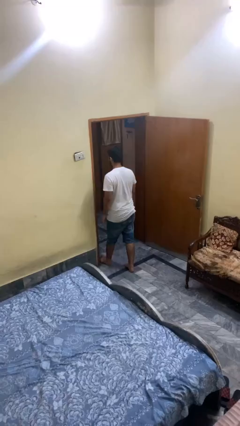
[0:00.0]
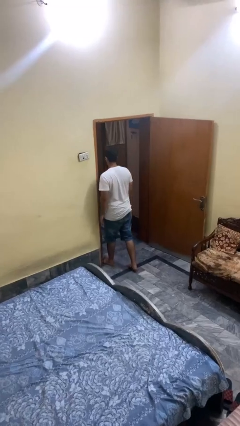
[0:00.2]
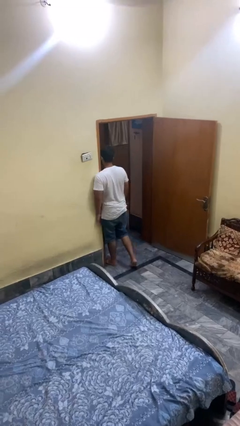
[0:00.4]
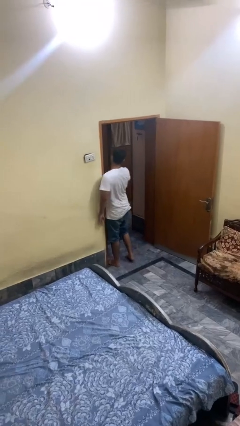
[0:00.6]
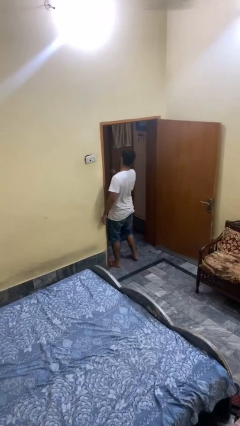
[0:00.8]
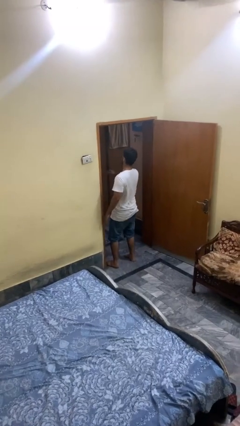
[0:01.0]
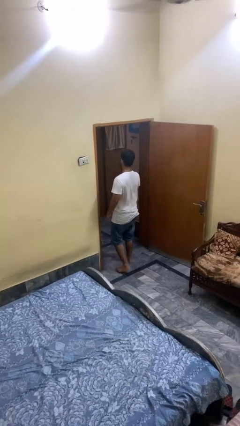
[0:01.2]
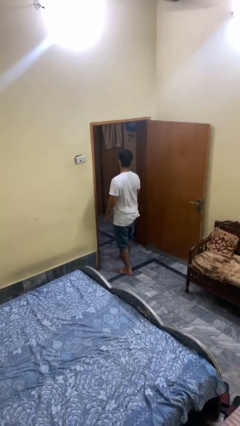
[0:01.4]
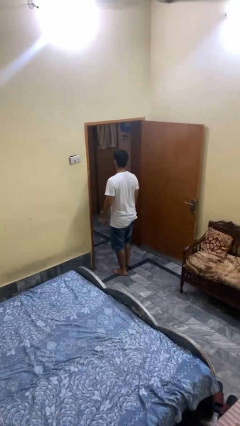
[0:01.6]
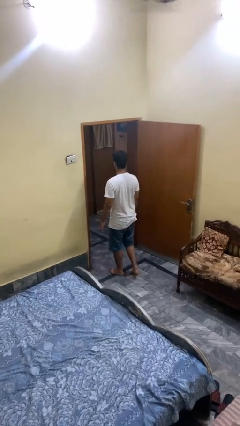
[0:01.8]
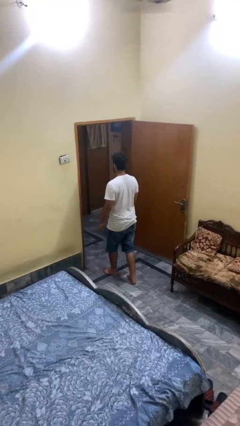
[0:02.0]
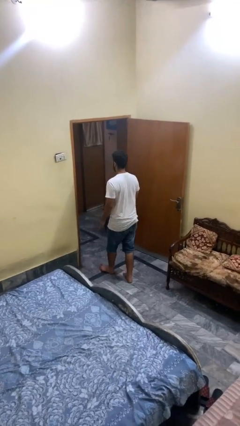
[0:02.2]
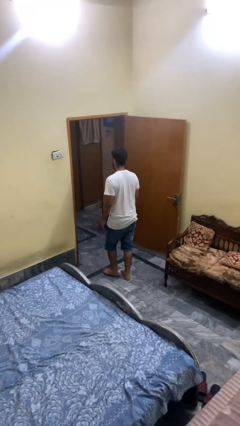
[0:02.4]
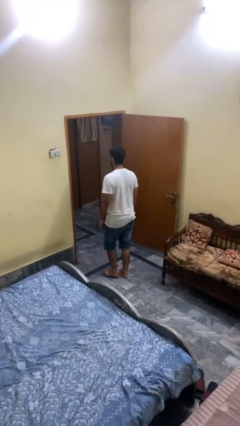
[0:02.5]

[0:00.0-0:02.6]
person bumps into wall

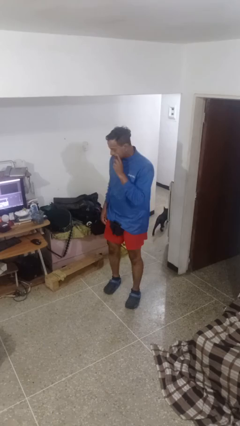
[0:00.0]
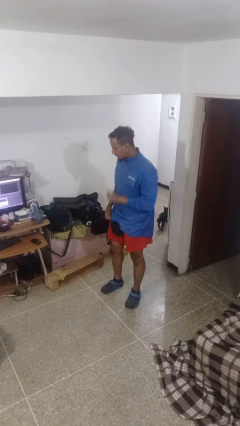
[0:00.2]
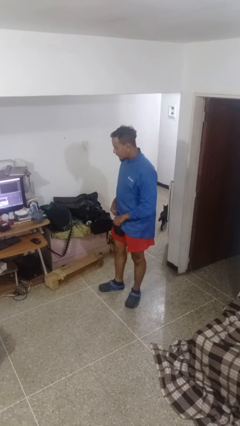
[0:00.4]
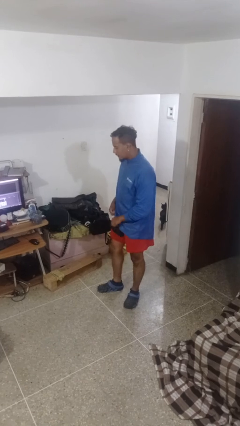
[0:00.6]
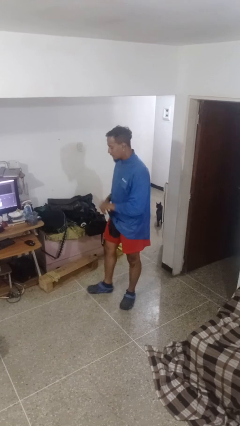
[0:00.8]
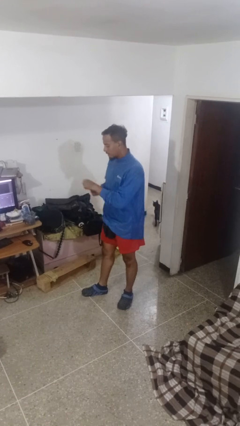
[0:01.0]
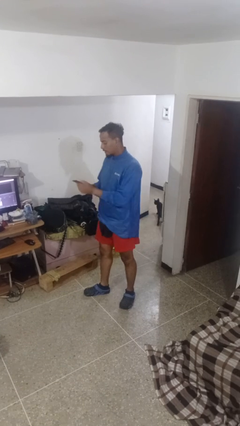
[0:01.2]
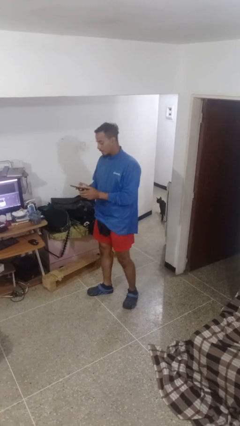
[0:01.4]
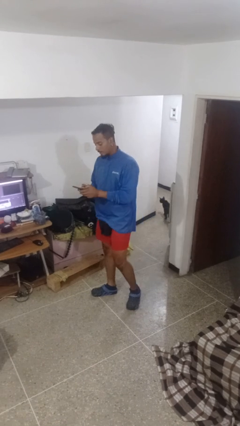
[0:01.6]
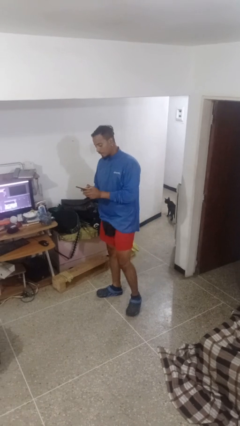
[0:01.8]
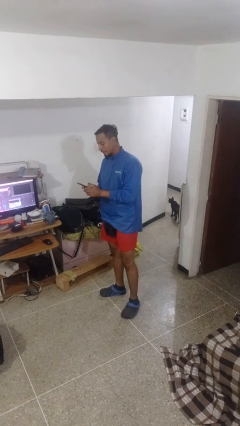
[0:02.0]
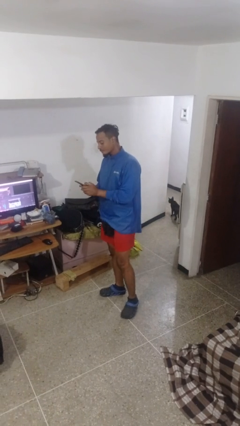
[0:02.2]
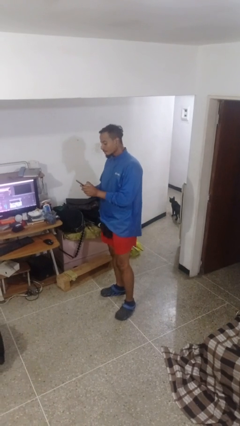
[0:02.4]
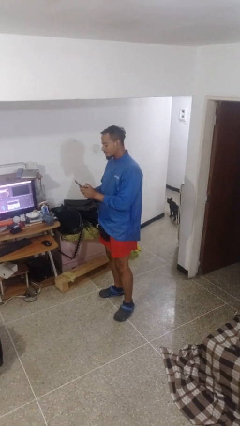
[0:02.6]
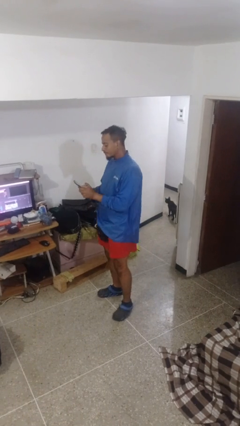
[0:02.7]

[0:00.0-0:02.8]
person takes phone from pocket

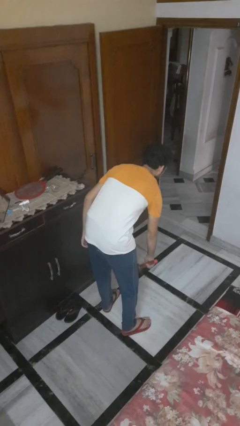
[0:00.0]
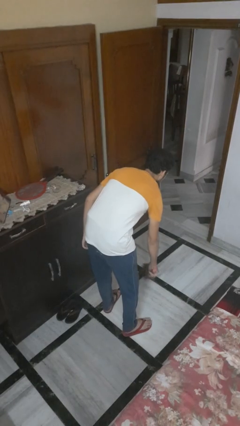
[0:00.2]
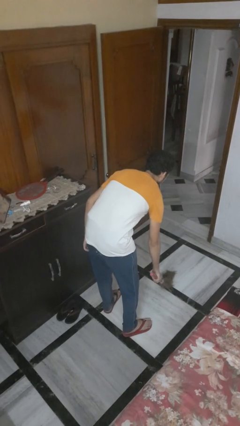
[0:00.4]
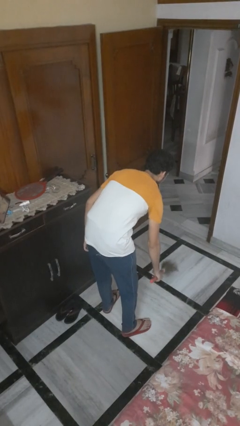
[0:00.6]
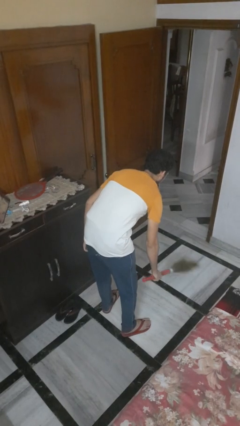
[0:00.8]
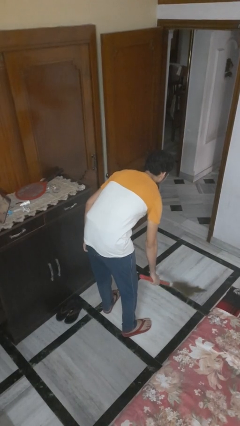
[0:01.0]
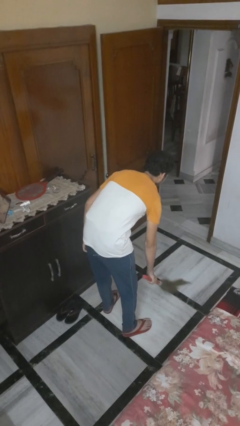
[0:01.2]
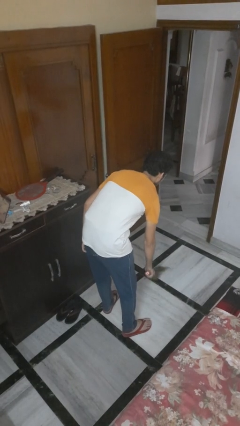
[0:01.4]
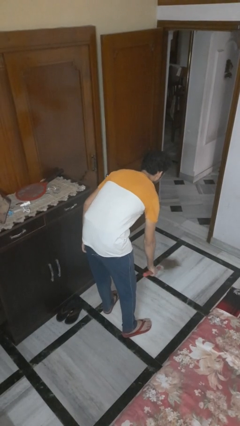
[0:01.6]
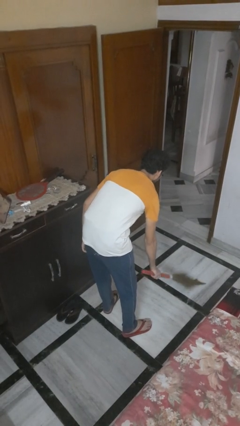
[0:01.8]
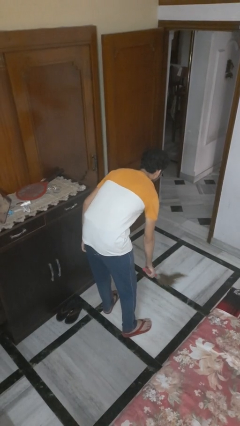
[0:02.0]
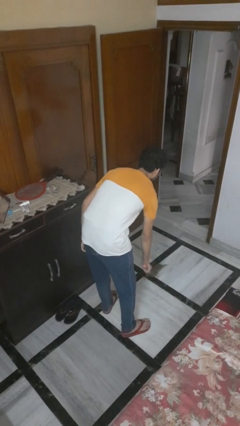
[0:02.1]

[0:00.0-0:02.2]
person sweeps floor

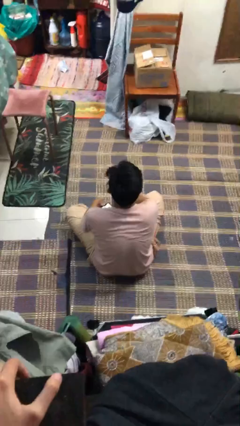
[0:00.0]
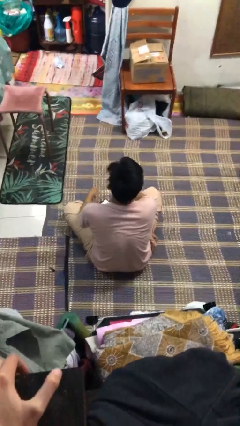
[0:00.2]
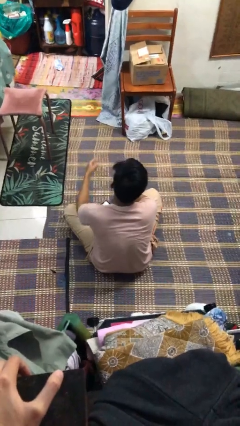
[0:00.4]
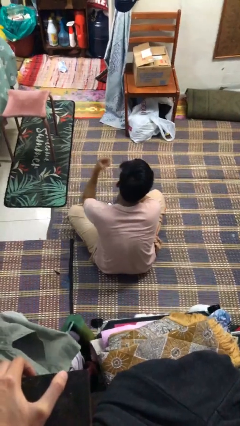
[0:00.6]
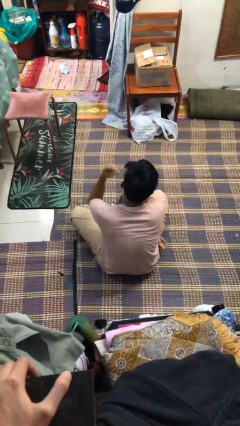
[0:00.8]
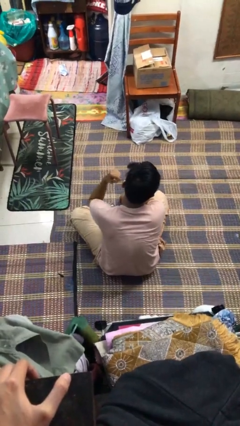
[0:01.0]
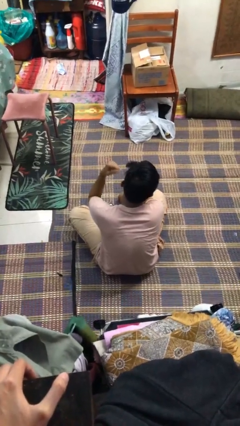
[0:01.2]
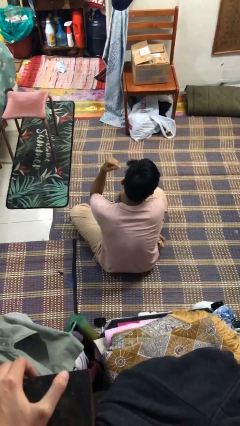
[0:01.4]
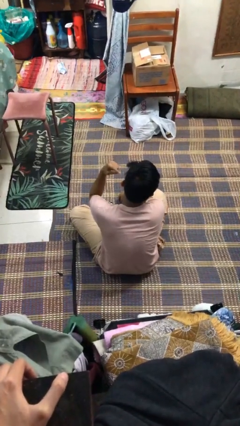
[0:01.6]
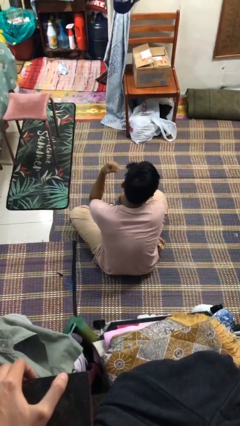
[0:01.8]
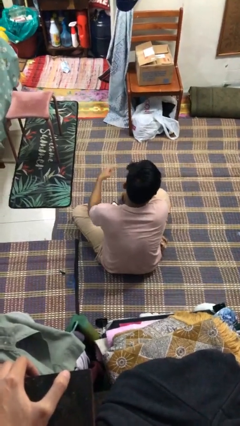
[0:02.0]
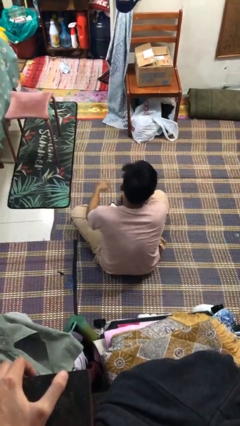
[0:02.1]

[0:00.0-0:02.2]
person gestures listen closely

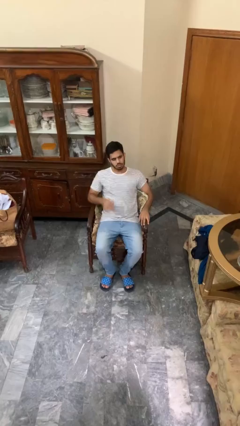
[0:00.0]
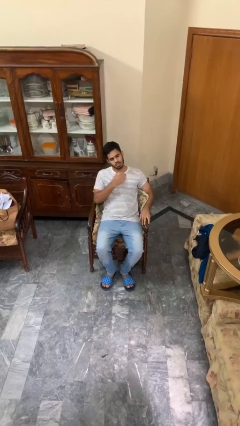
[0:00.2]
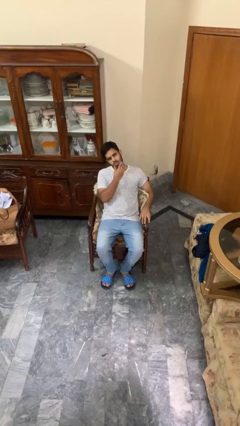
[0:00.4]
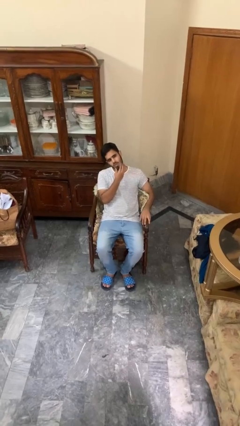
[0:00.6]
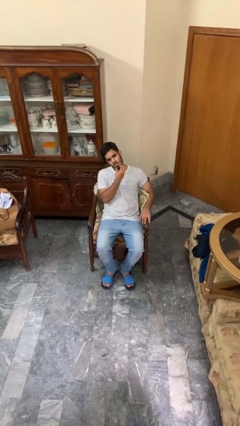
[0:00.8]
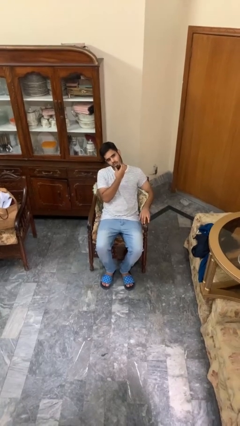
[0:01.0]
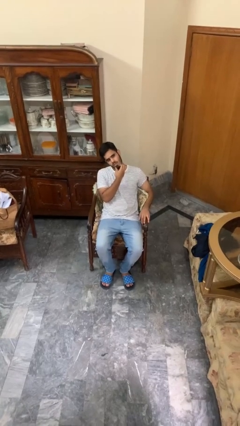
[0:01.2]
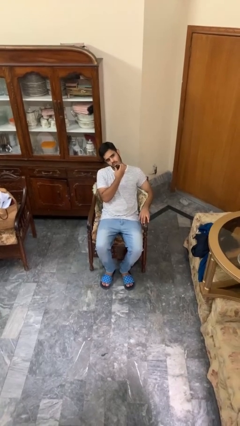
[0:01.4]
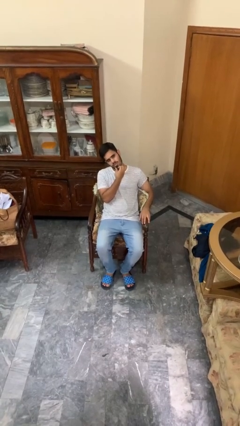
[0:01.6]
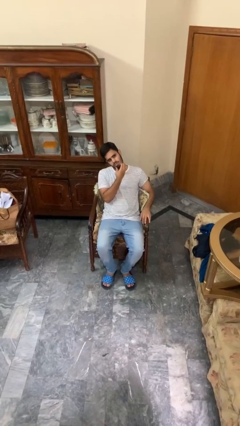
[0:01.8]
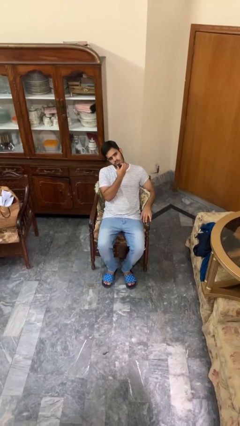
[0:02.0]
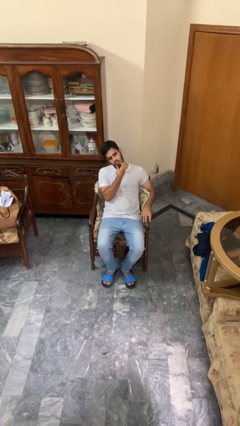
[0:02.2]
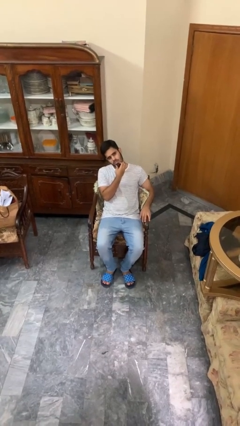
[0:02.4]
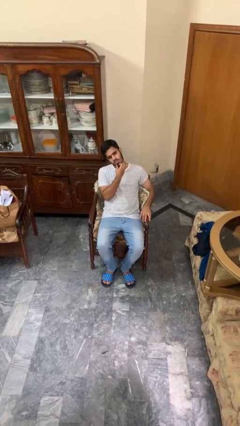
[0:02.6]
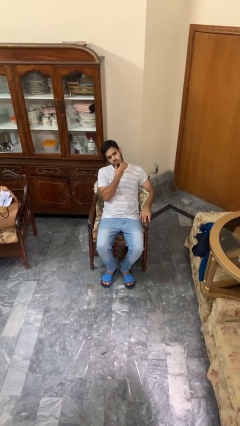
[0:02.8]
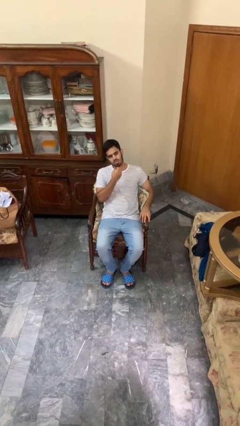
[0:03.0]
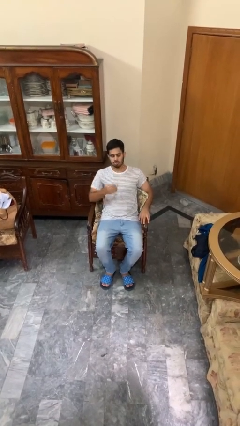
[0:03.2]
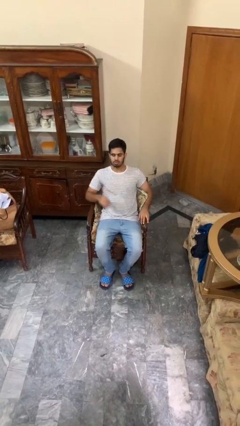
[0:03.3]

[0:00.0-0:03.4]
person strokes chin

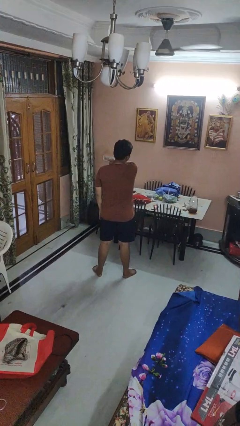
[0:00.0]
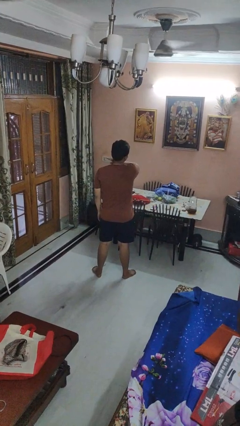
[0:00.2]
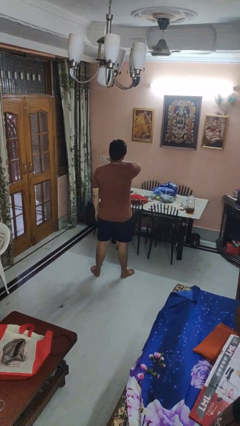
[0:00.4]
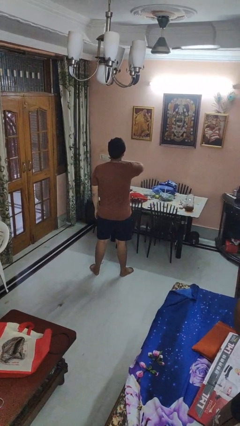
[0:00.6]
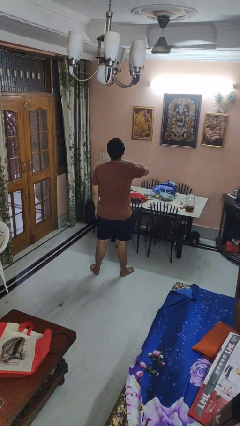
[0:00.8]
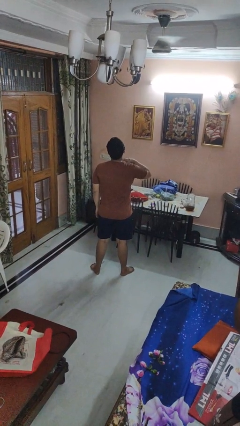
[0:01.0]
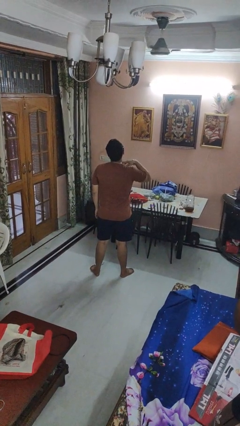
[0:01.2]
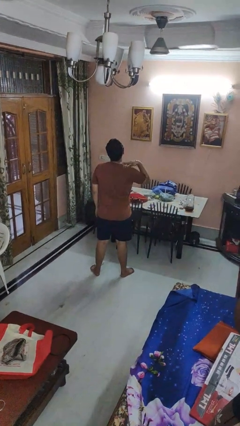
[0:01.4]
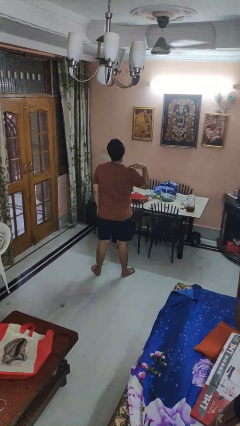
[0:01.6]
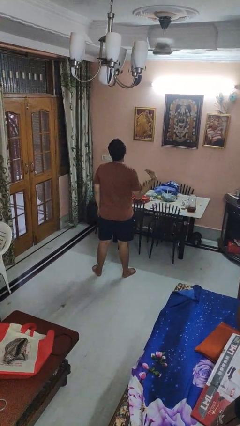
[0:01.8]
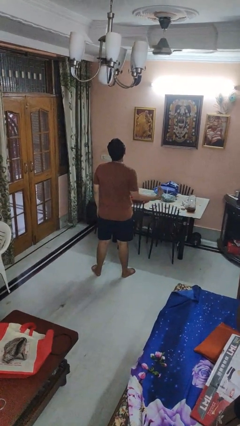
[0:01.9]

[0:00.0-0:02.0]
person gestures cut

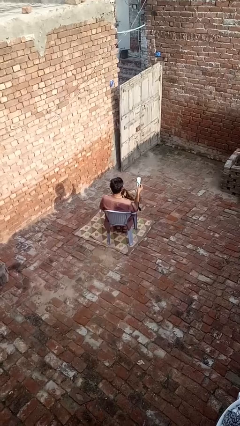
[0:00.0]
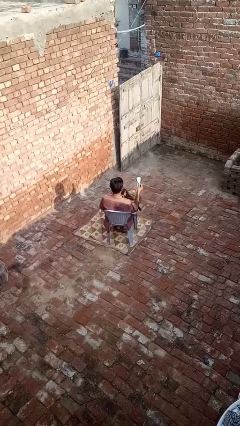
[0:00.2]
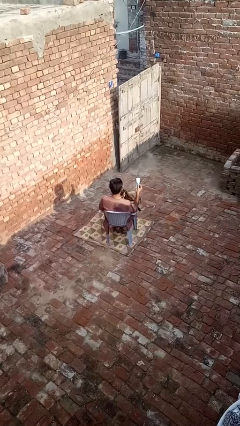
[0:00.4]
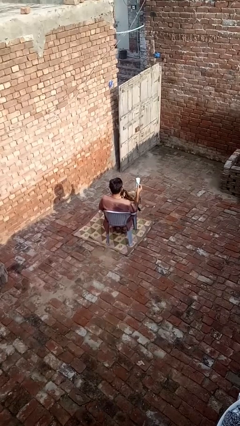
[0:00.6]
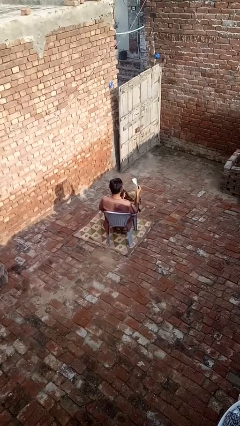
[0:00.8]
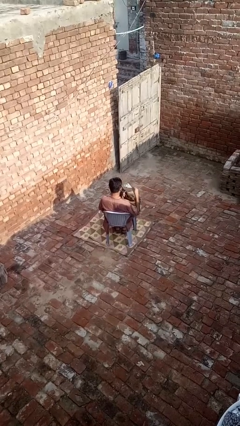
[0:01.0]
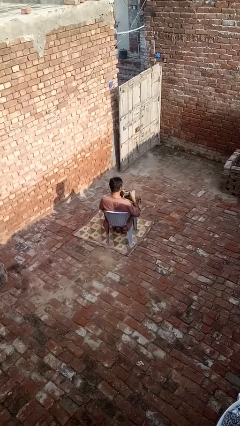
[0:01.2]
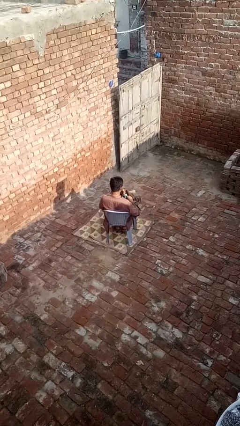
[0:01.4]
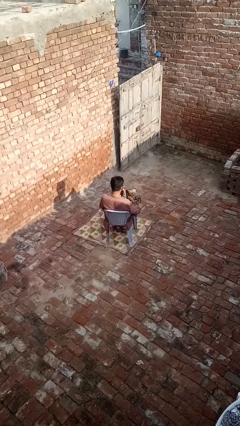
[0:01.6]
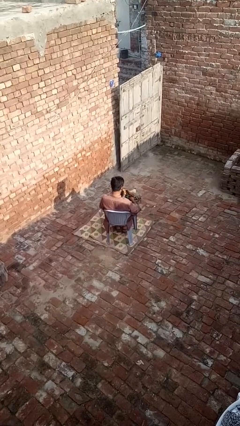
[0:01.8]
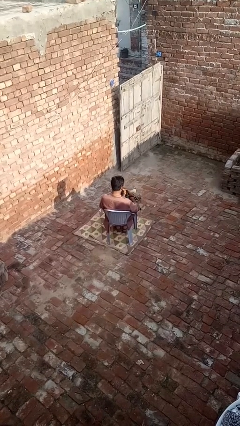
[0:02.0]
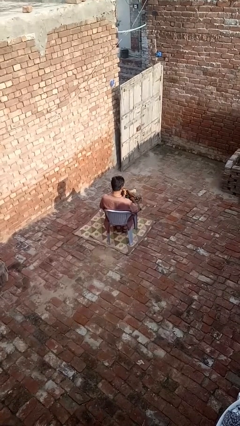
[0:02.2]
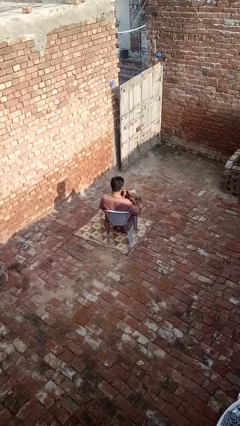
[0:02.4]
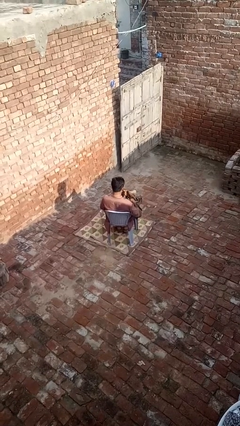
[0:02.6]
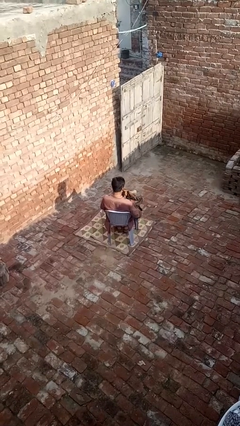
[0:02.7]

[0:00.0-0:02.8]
person puts object into purse
